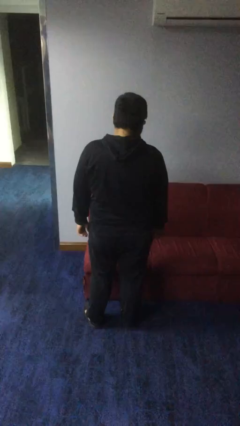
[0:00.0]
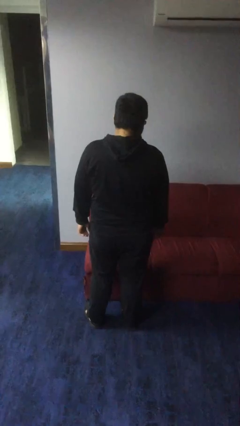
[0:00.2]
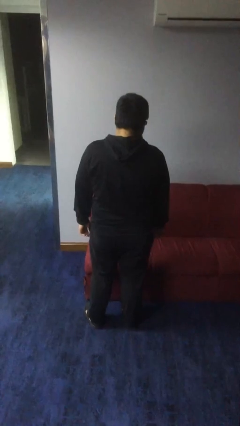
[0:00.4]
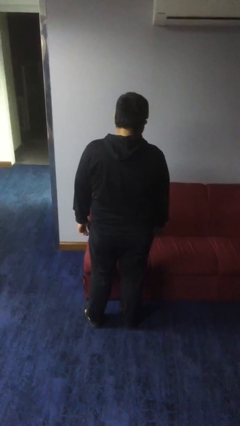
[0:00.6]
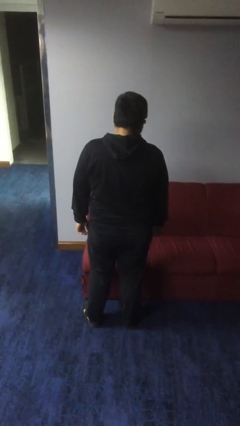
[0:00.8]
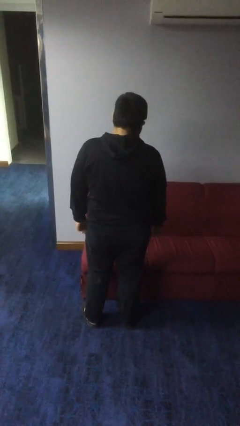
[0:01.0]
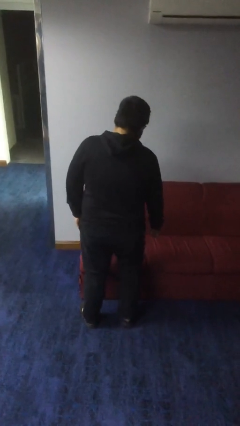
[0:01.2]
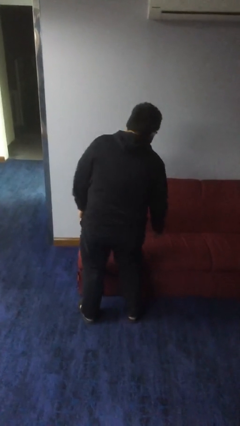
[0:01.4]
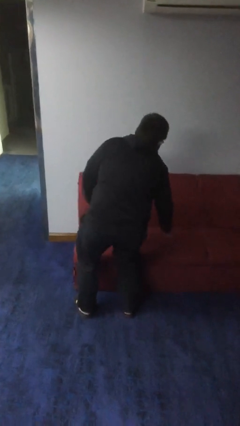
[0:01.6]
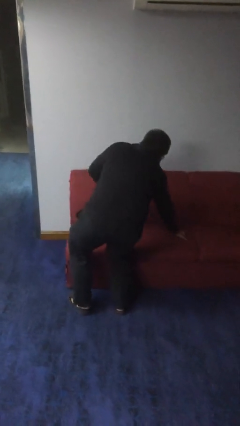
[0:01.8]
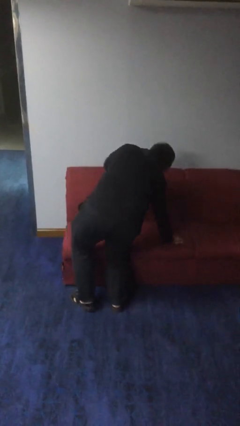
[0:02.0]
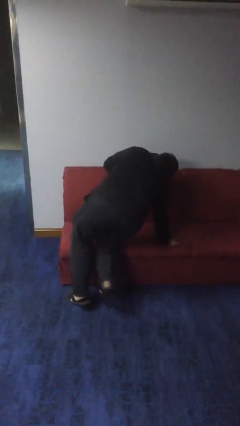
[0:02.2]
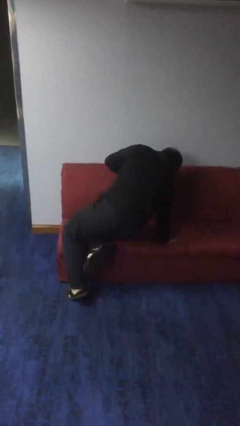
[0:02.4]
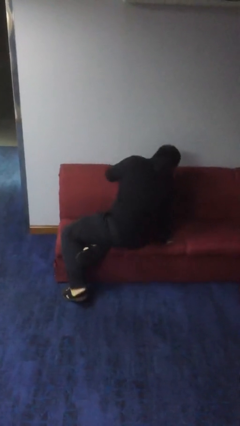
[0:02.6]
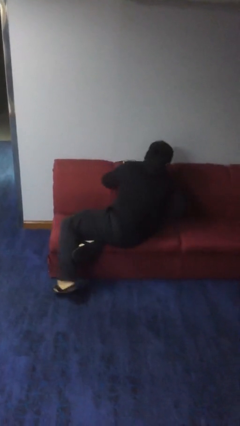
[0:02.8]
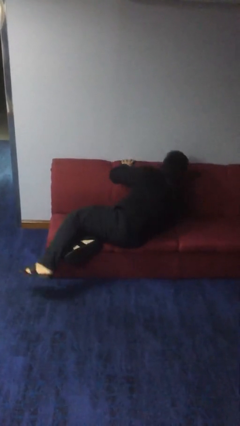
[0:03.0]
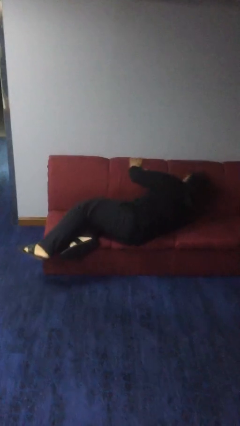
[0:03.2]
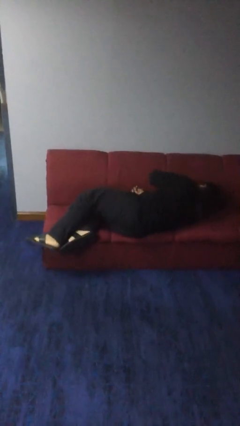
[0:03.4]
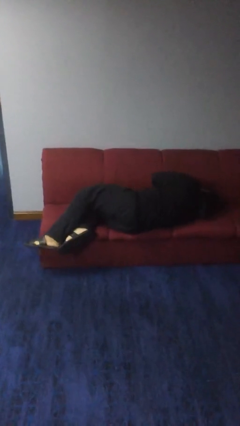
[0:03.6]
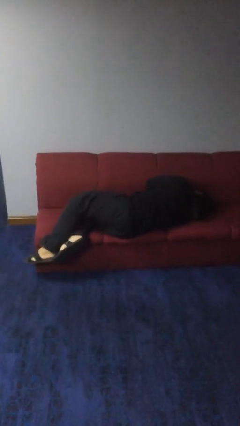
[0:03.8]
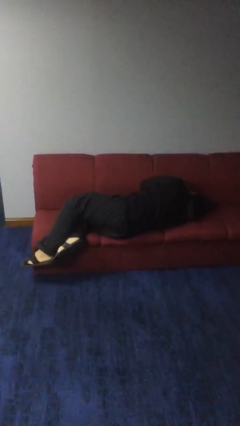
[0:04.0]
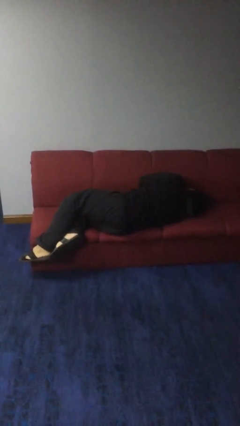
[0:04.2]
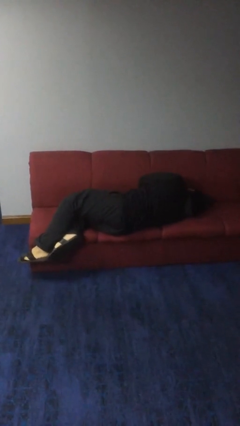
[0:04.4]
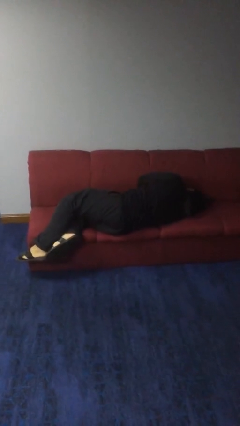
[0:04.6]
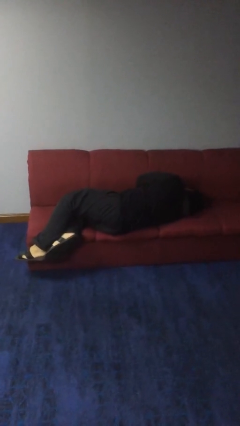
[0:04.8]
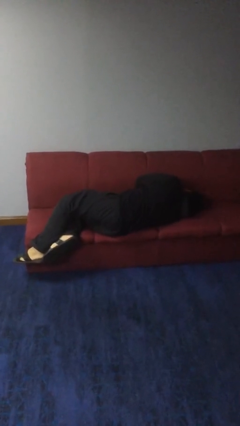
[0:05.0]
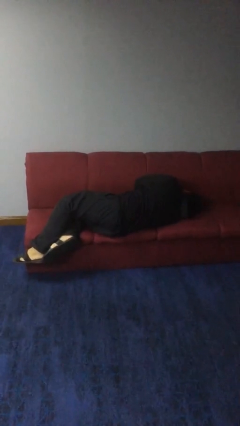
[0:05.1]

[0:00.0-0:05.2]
person lies down on couch

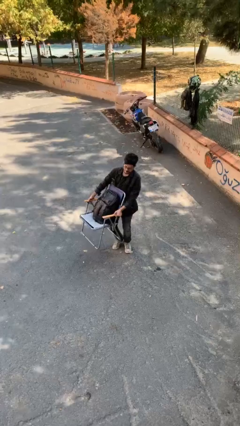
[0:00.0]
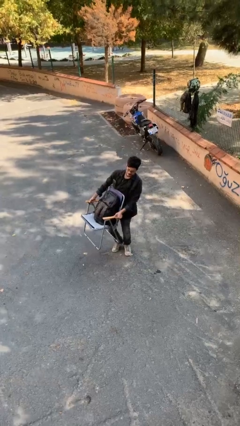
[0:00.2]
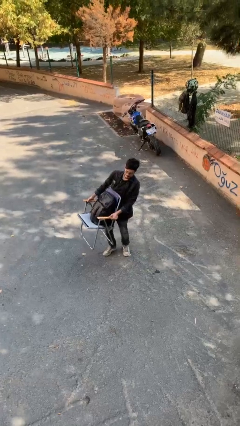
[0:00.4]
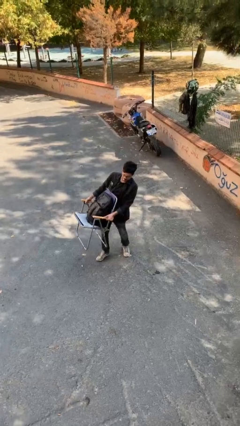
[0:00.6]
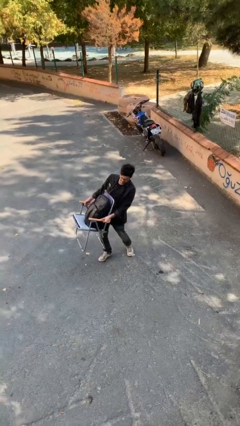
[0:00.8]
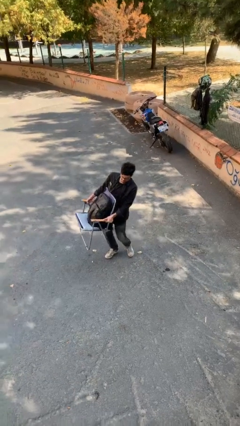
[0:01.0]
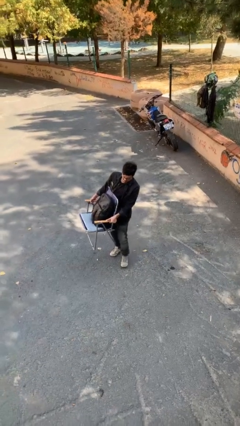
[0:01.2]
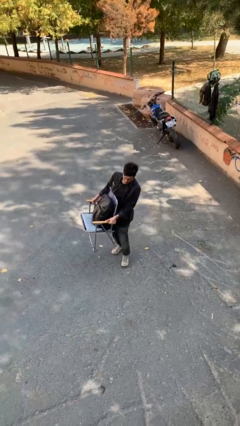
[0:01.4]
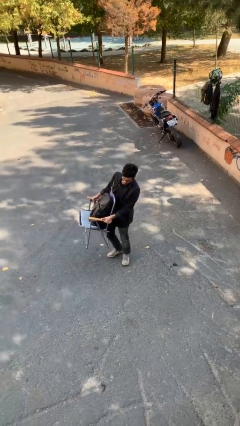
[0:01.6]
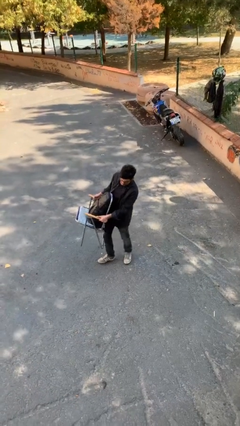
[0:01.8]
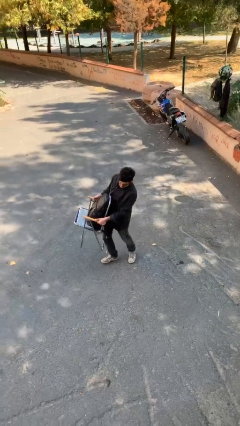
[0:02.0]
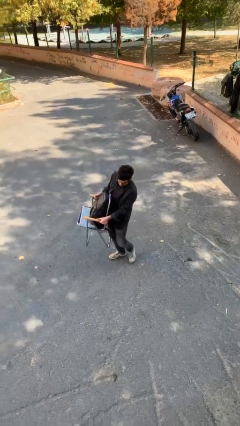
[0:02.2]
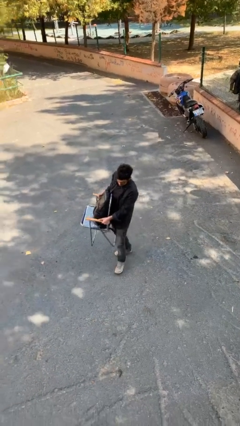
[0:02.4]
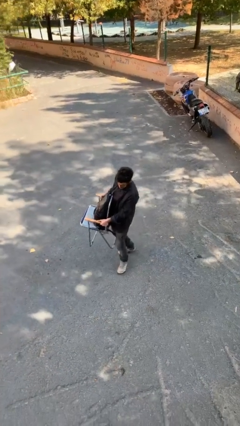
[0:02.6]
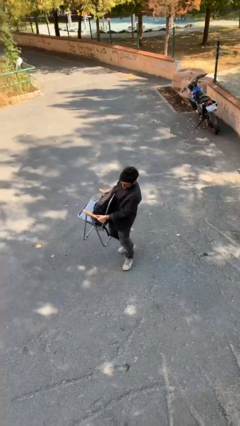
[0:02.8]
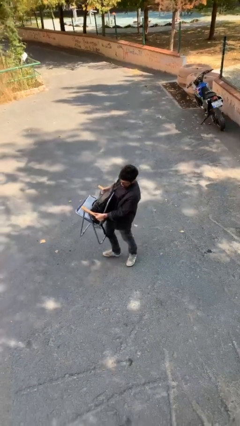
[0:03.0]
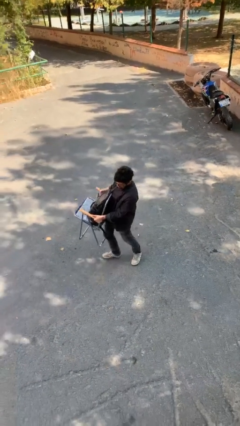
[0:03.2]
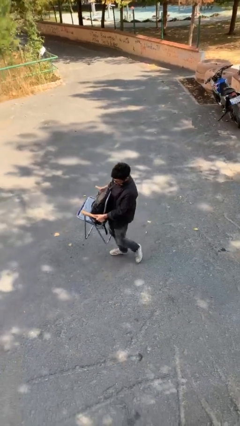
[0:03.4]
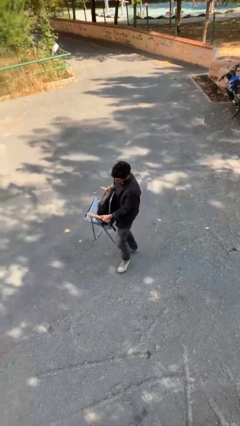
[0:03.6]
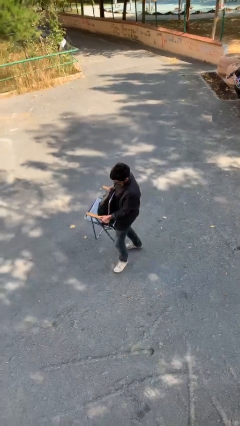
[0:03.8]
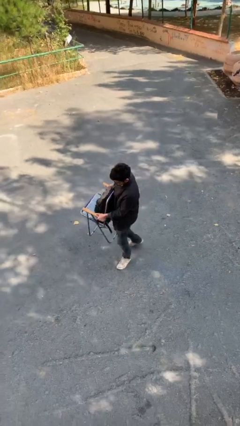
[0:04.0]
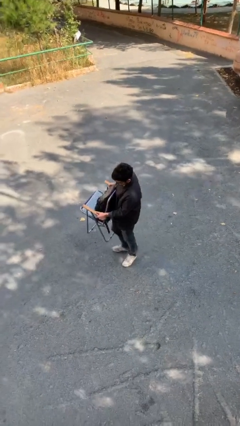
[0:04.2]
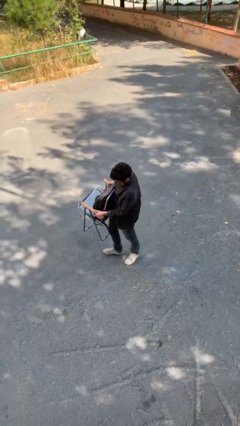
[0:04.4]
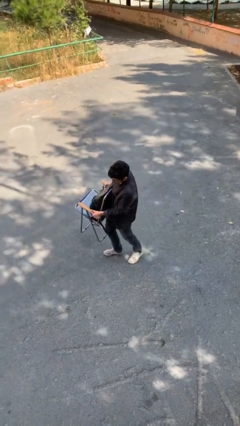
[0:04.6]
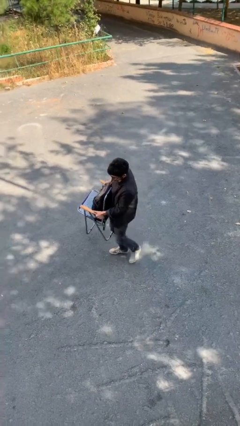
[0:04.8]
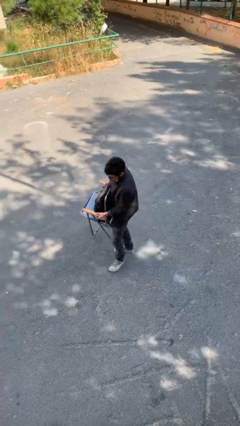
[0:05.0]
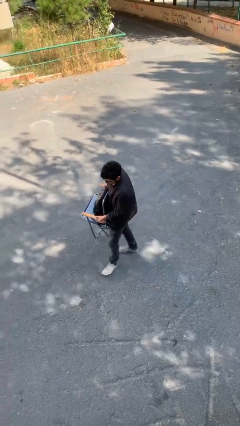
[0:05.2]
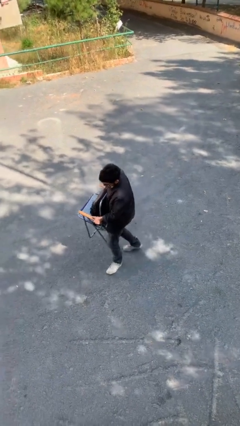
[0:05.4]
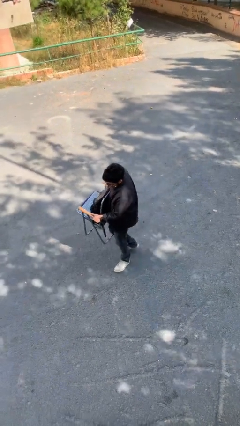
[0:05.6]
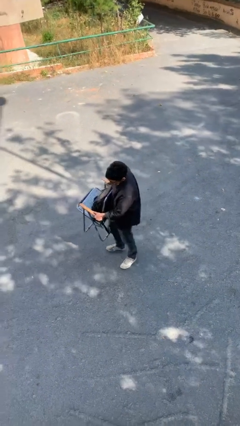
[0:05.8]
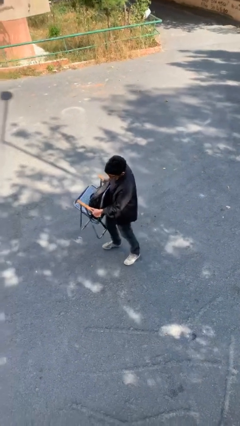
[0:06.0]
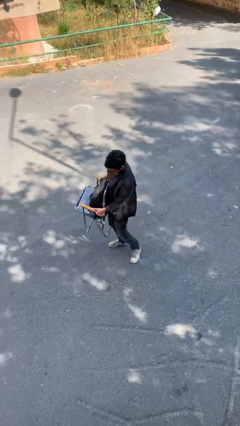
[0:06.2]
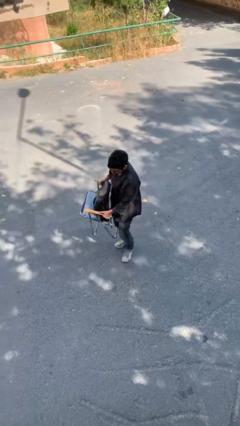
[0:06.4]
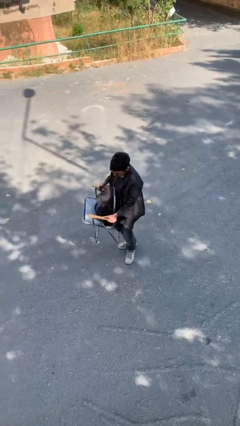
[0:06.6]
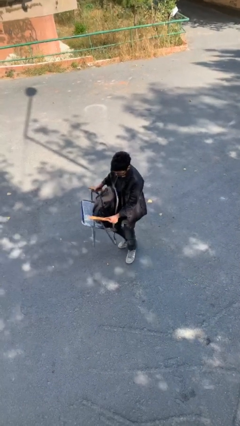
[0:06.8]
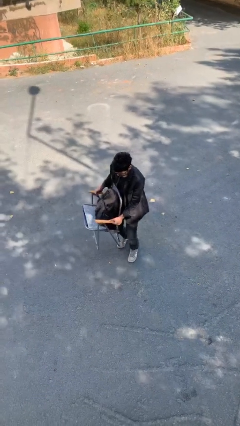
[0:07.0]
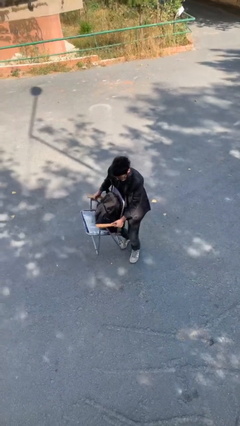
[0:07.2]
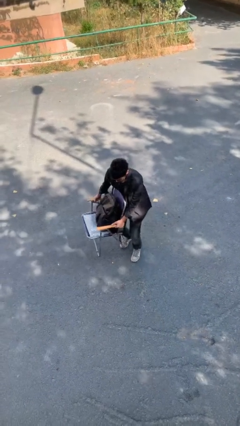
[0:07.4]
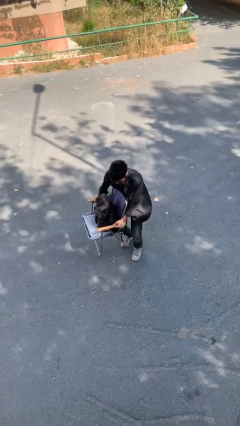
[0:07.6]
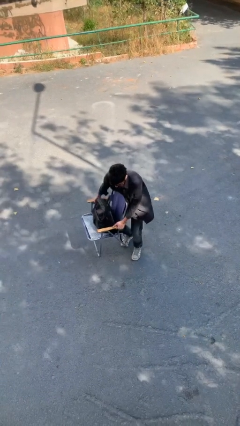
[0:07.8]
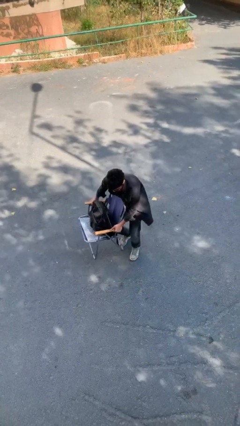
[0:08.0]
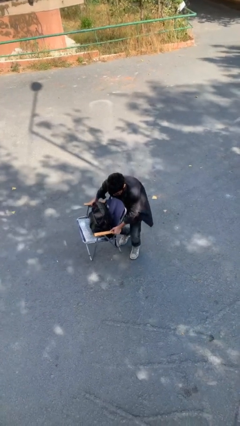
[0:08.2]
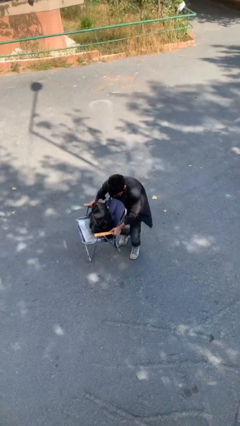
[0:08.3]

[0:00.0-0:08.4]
person carries heavy object

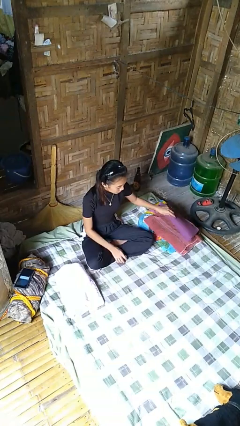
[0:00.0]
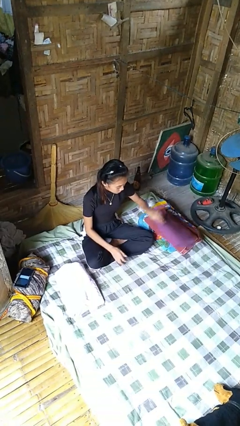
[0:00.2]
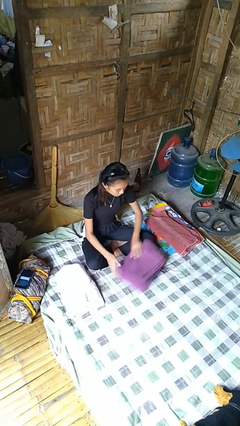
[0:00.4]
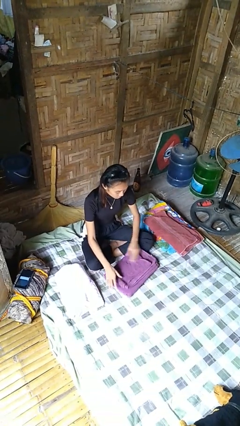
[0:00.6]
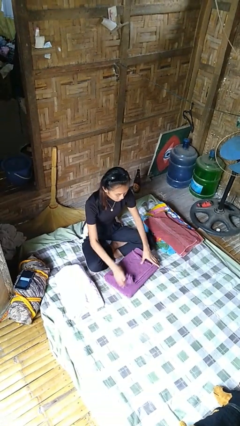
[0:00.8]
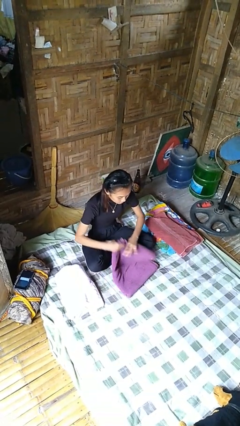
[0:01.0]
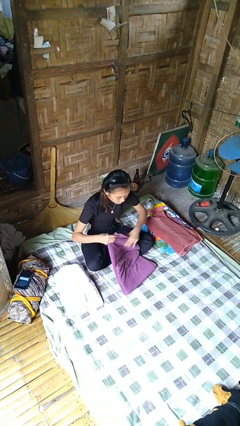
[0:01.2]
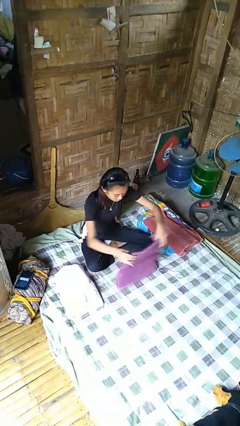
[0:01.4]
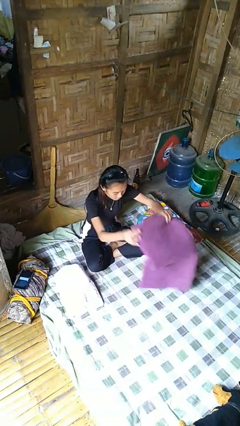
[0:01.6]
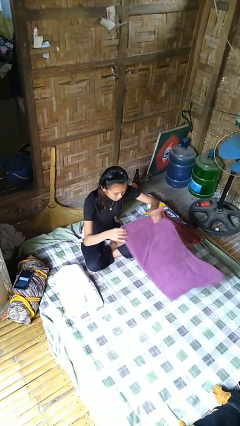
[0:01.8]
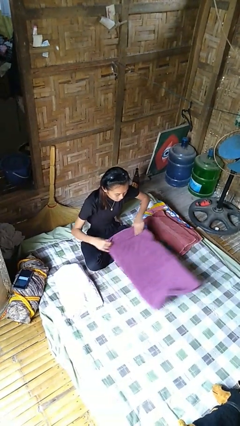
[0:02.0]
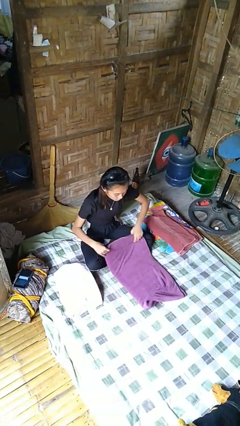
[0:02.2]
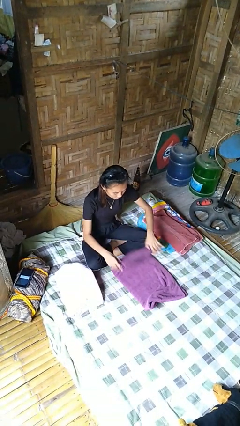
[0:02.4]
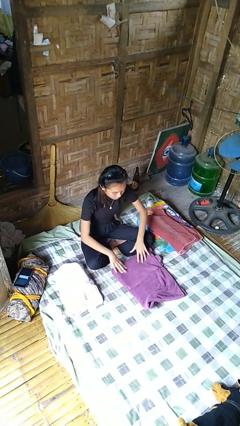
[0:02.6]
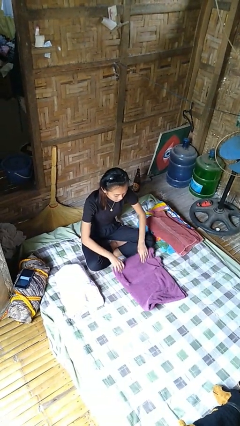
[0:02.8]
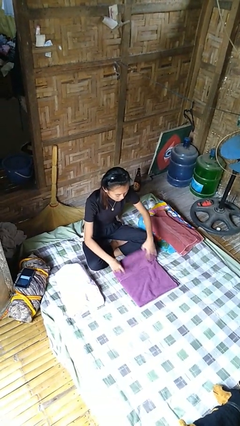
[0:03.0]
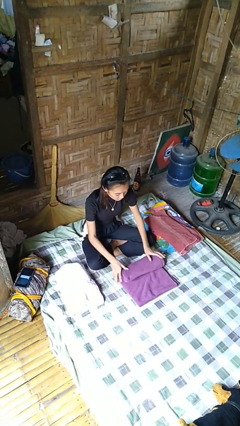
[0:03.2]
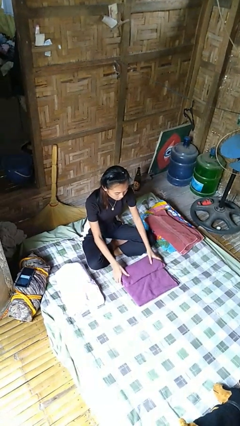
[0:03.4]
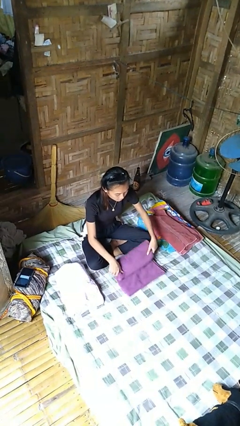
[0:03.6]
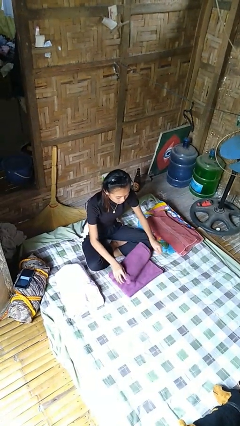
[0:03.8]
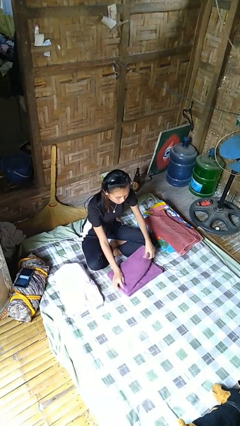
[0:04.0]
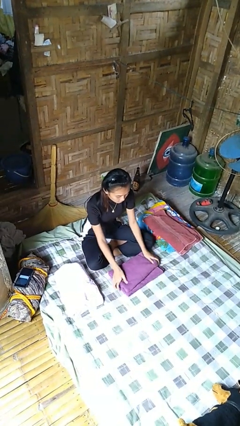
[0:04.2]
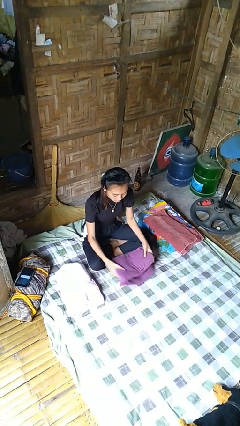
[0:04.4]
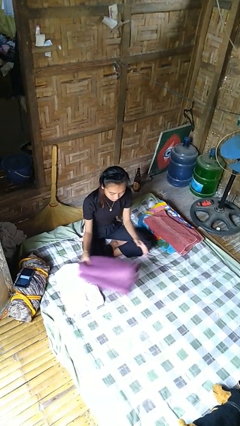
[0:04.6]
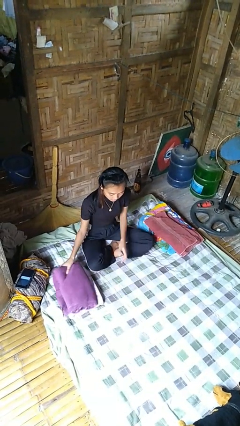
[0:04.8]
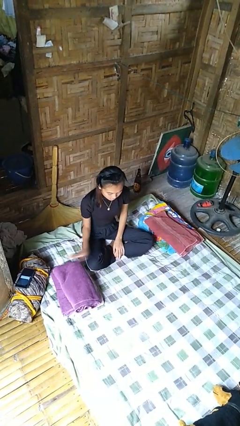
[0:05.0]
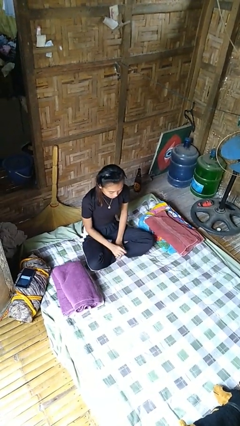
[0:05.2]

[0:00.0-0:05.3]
person folds towel
